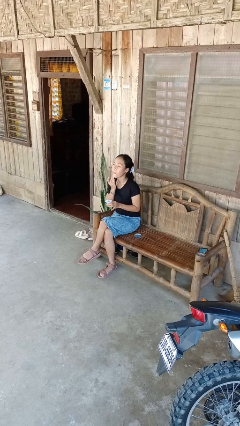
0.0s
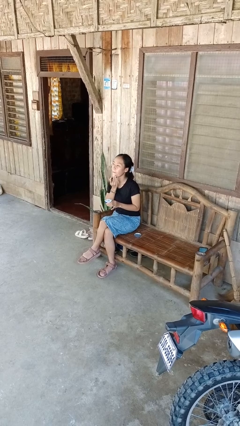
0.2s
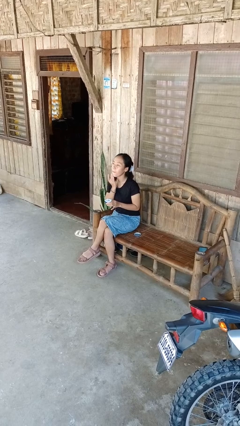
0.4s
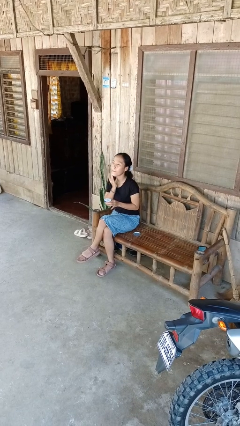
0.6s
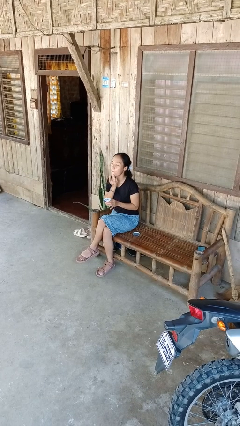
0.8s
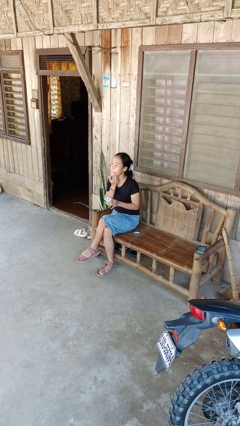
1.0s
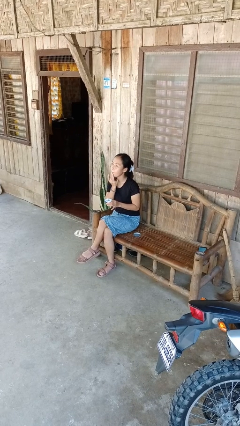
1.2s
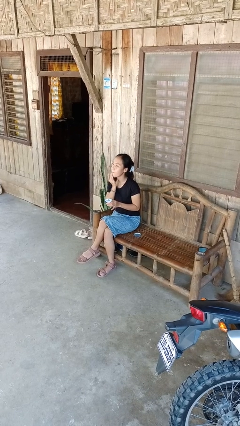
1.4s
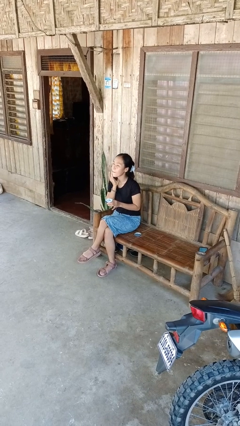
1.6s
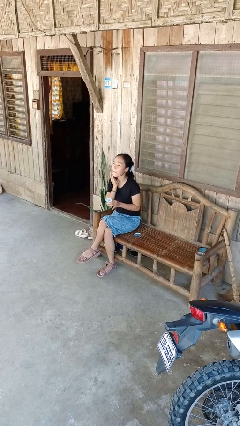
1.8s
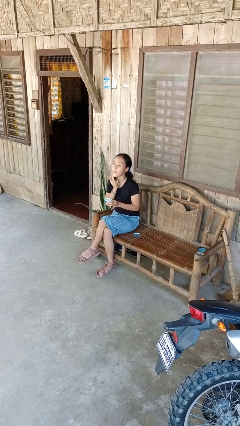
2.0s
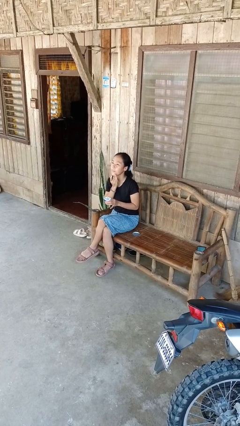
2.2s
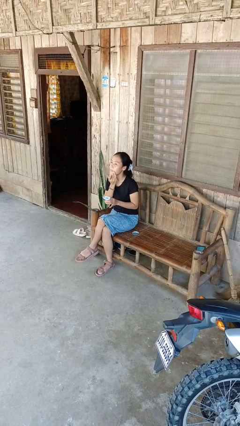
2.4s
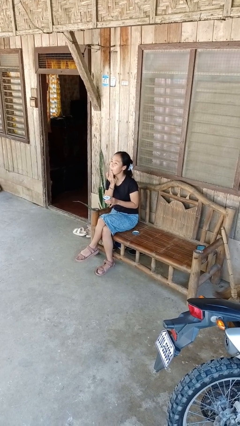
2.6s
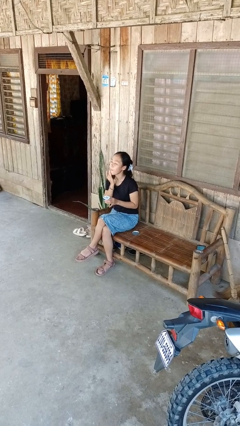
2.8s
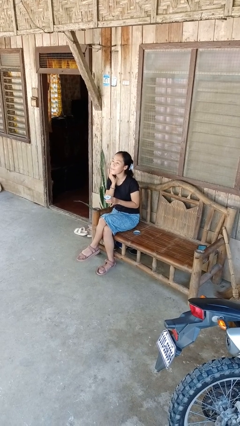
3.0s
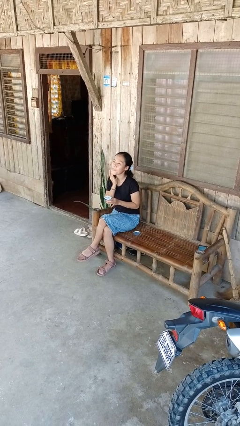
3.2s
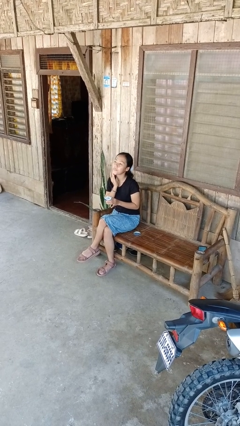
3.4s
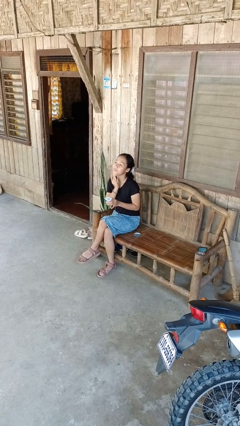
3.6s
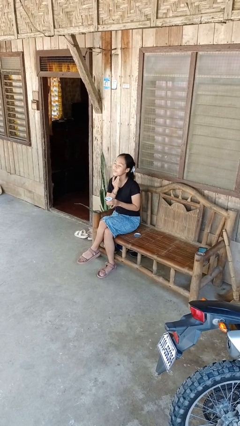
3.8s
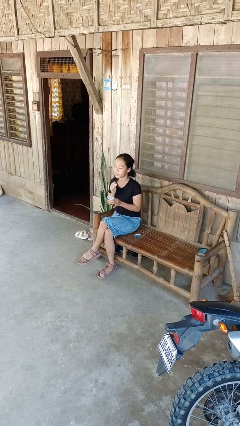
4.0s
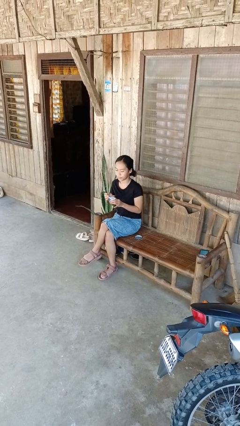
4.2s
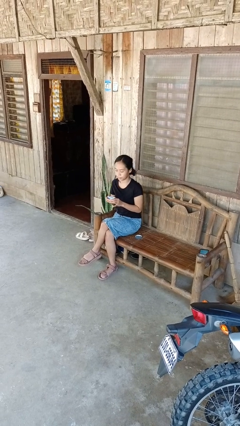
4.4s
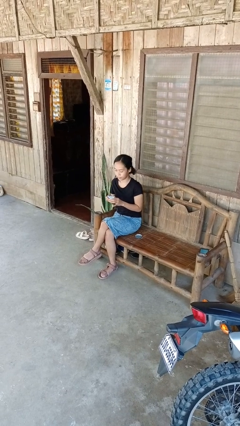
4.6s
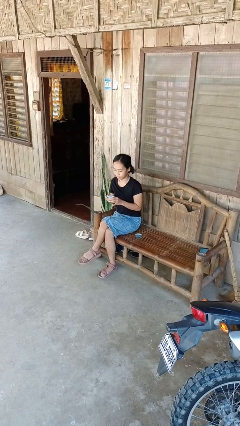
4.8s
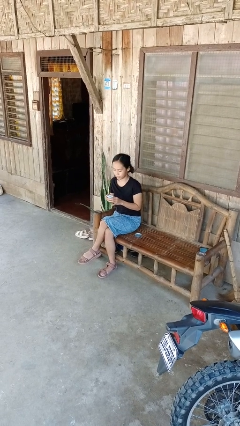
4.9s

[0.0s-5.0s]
person applies facial moisturizer

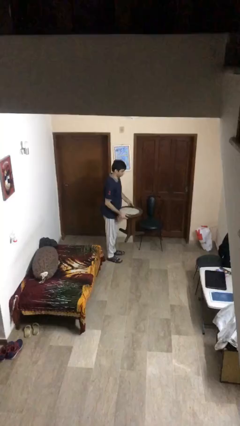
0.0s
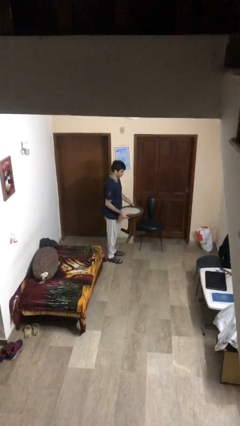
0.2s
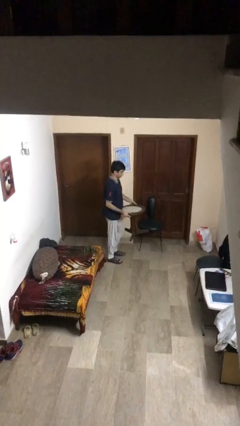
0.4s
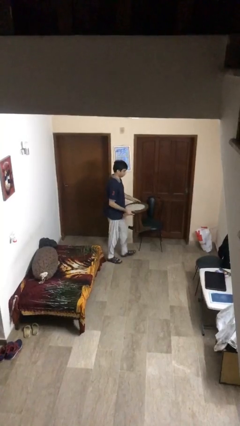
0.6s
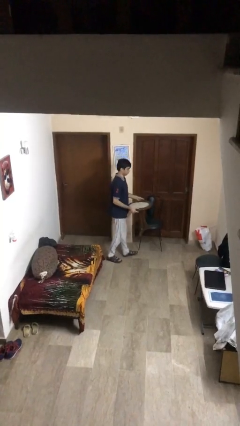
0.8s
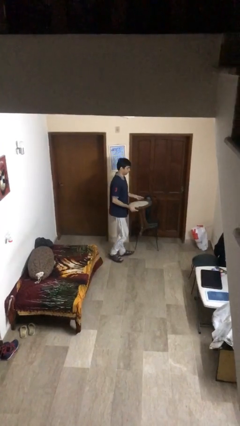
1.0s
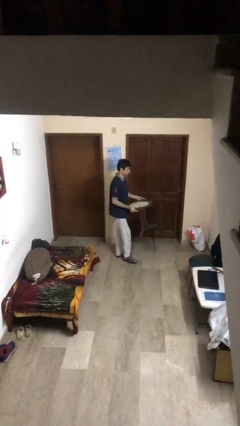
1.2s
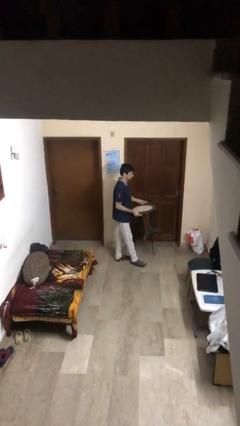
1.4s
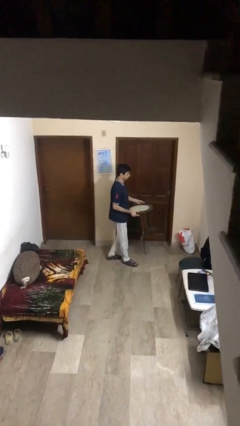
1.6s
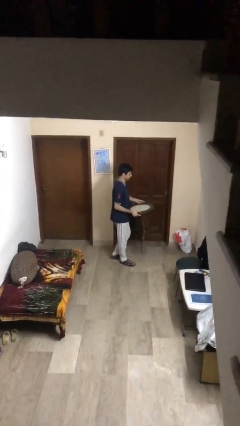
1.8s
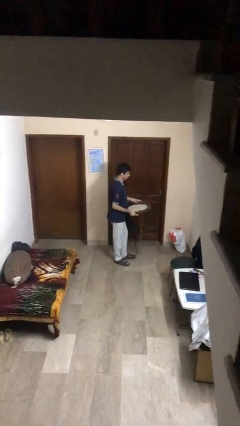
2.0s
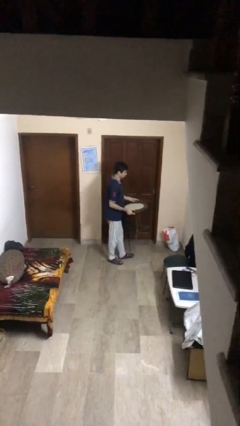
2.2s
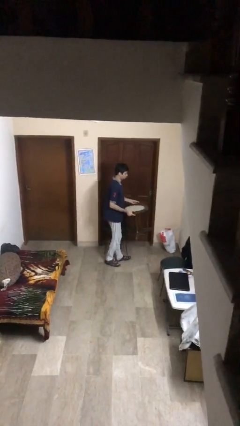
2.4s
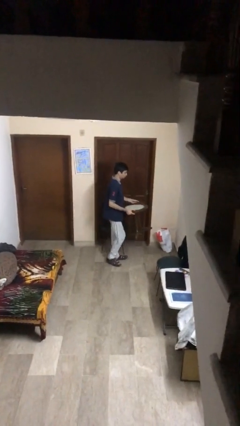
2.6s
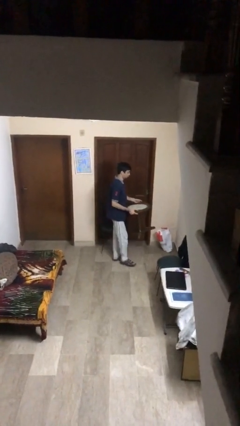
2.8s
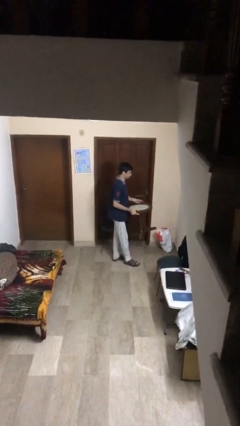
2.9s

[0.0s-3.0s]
person carries heavy object

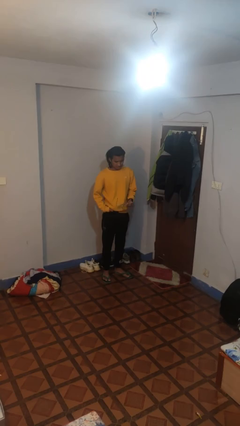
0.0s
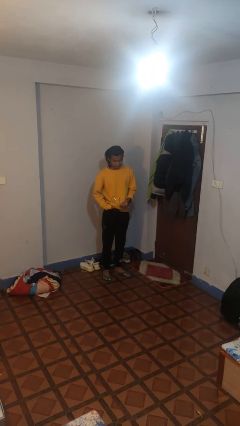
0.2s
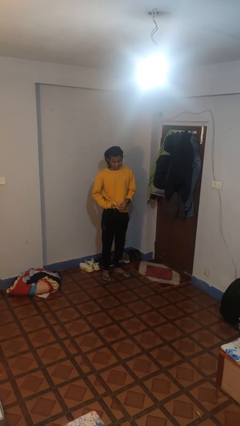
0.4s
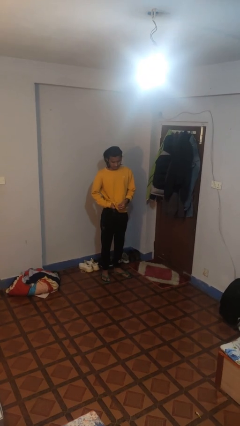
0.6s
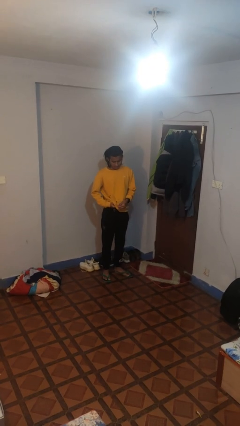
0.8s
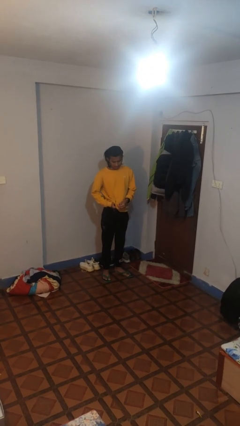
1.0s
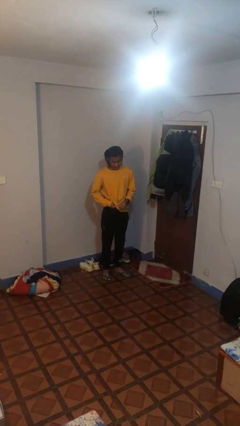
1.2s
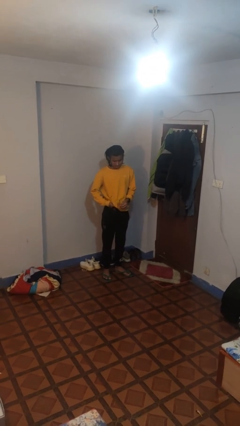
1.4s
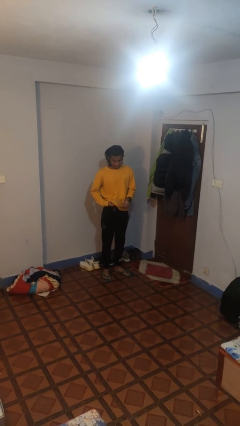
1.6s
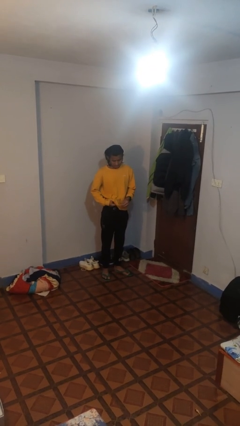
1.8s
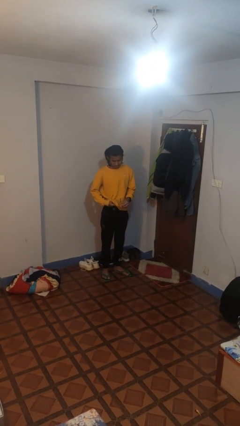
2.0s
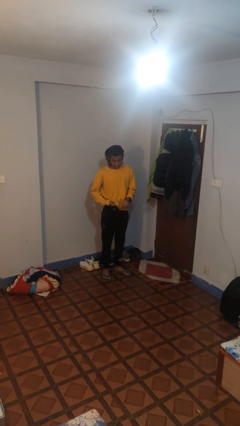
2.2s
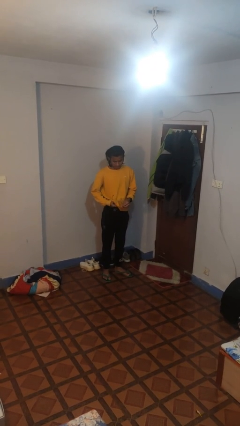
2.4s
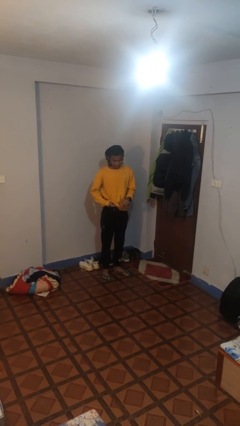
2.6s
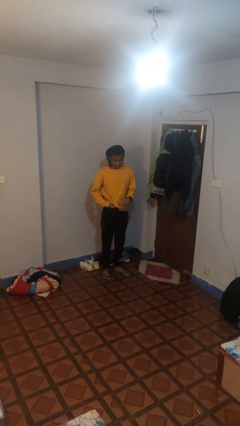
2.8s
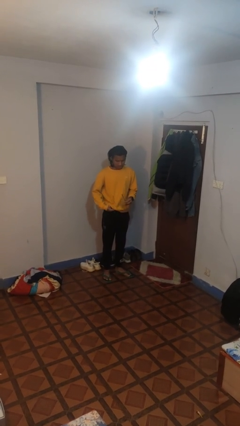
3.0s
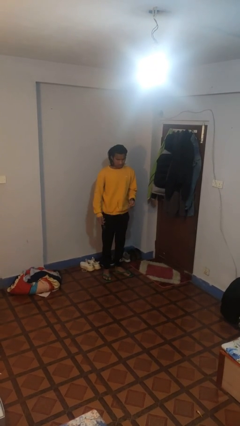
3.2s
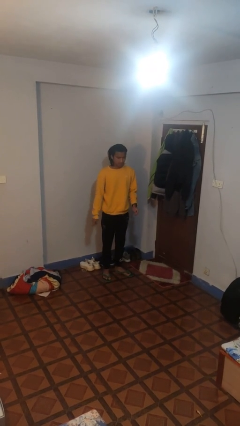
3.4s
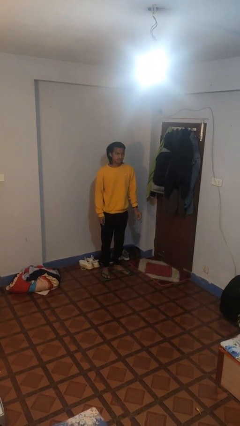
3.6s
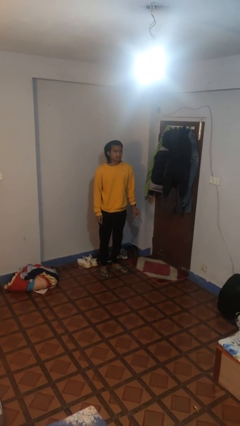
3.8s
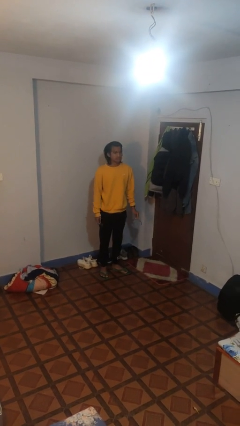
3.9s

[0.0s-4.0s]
person cleans eyeglasses

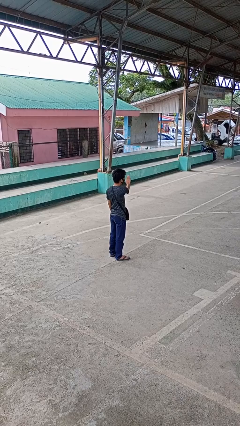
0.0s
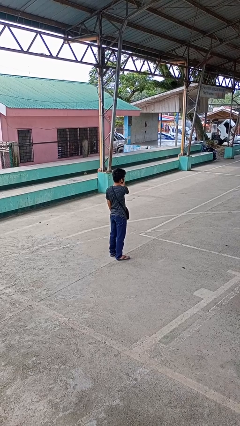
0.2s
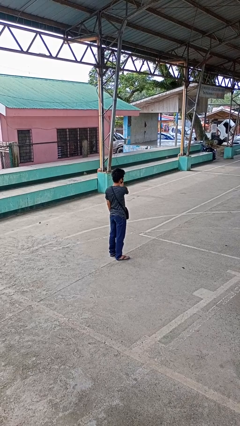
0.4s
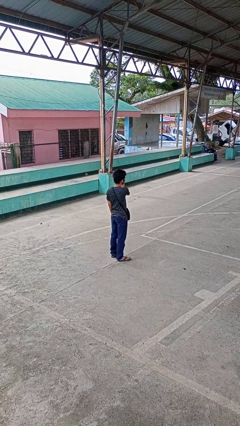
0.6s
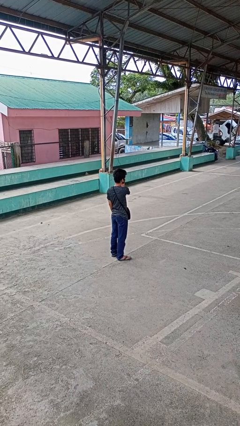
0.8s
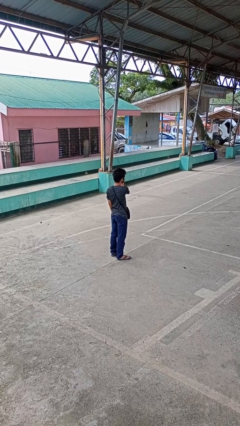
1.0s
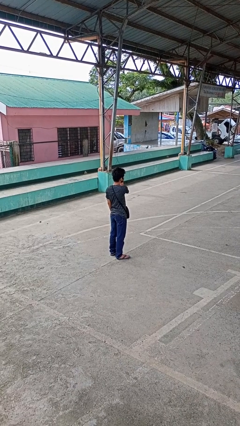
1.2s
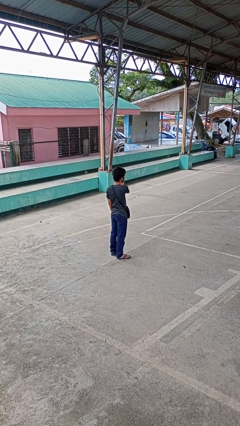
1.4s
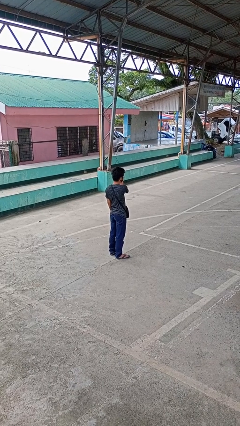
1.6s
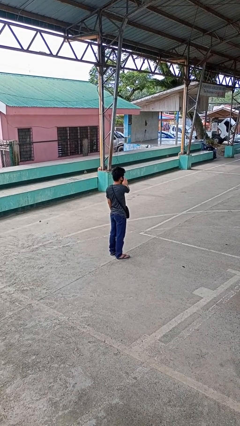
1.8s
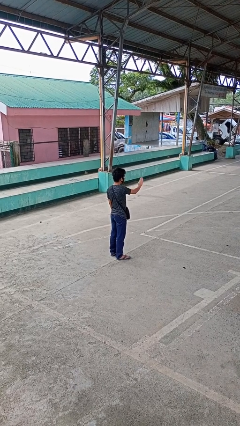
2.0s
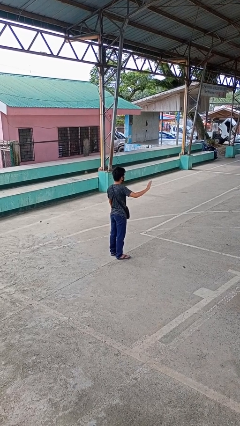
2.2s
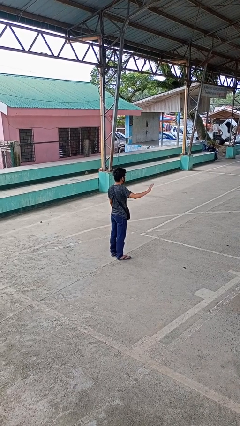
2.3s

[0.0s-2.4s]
person gestures swipe left

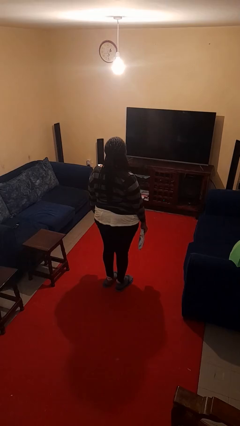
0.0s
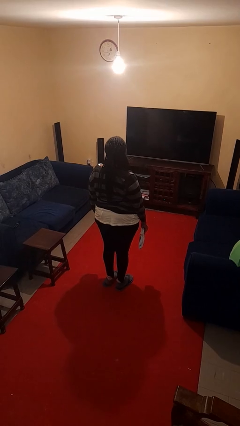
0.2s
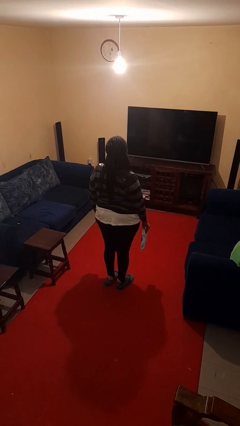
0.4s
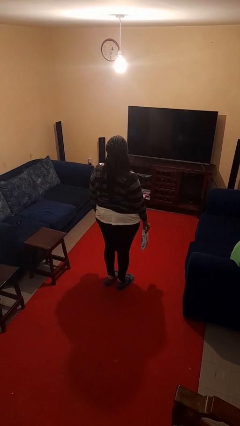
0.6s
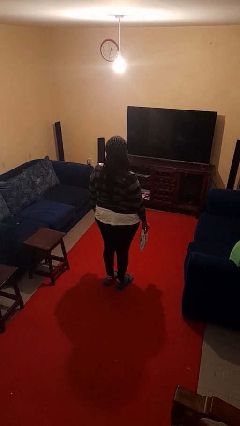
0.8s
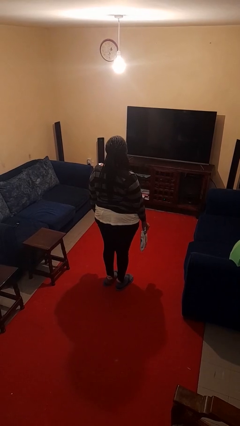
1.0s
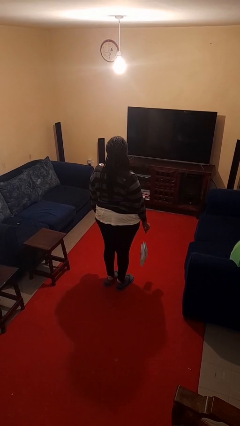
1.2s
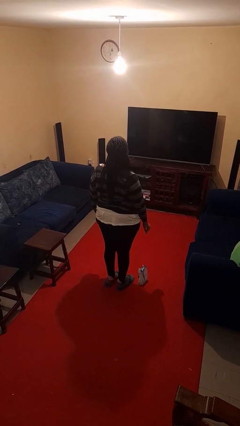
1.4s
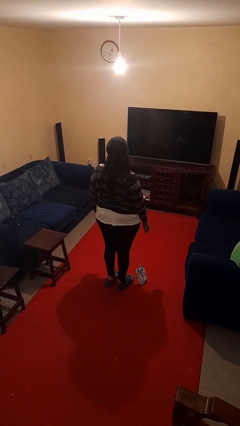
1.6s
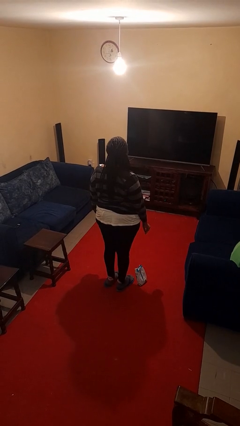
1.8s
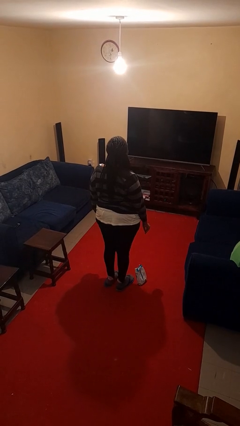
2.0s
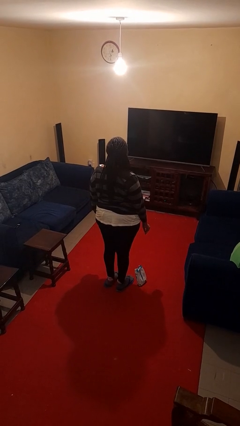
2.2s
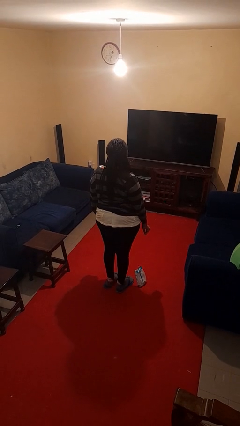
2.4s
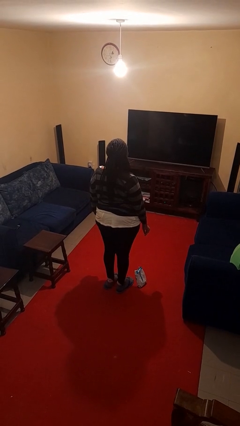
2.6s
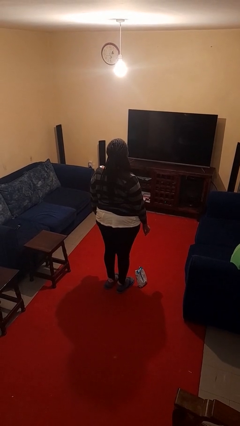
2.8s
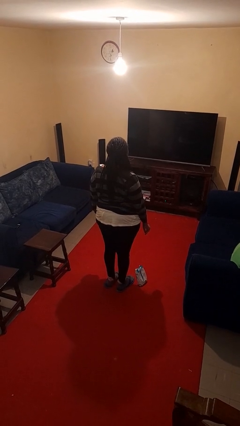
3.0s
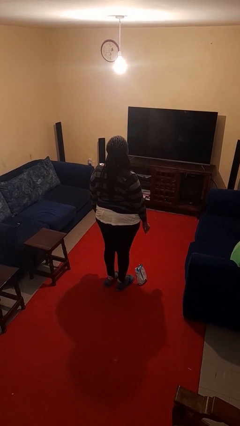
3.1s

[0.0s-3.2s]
person drops object

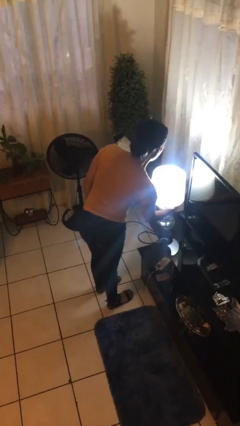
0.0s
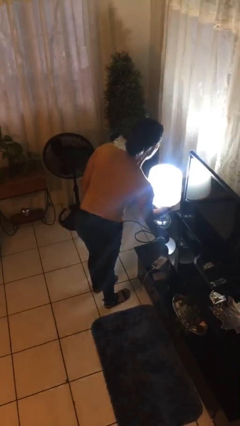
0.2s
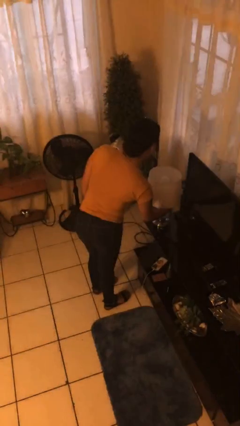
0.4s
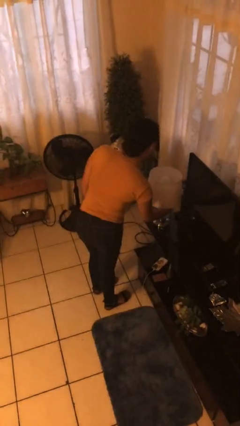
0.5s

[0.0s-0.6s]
person turns off lamp
